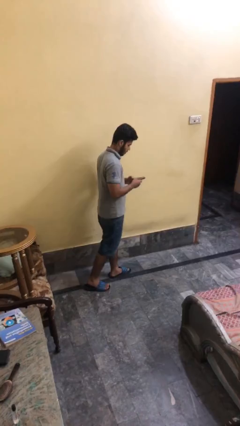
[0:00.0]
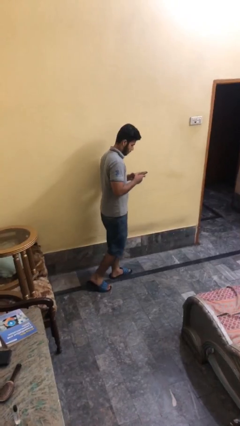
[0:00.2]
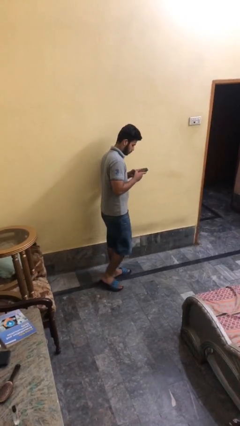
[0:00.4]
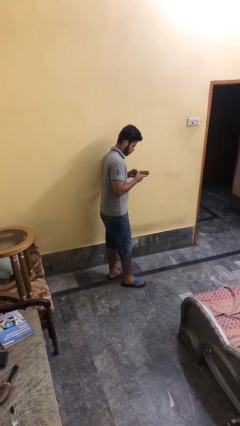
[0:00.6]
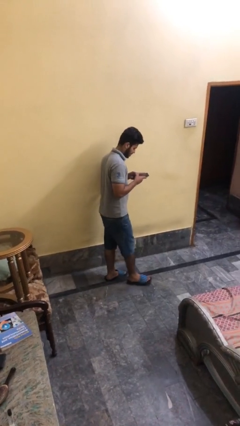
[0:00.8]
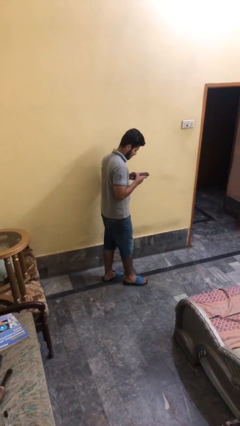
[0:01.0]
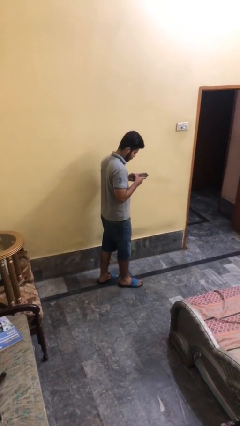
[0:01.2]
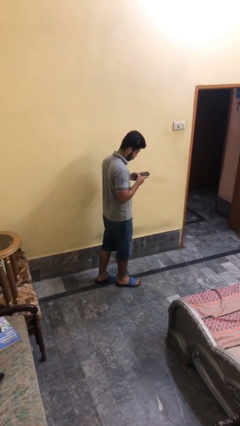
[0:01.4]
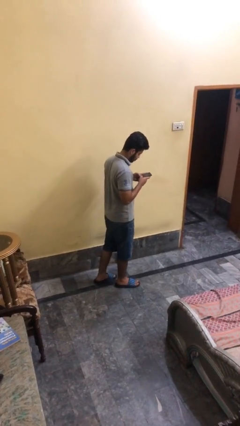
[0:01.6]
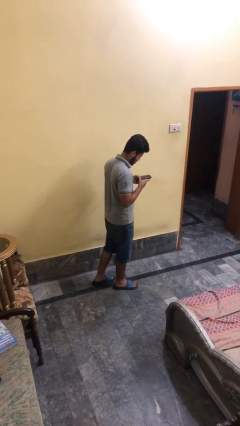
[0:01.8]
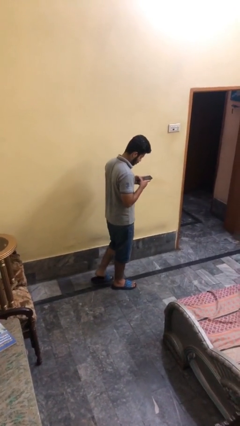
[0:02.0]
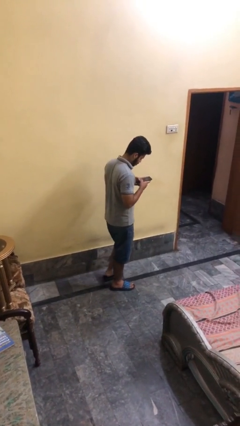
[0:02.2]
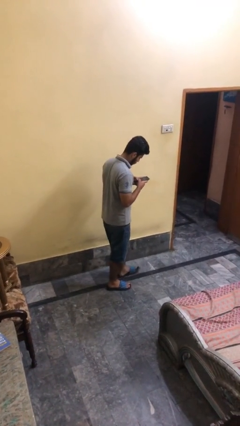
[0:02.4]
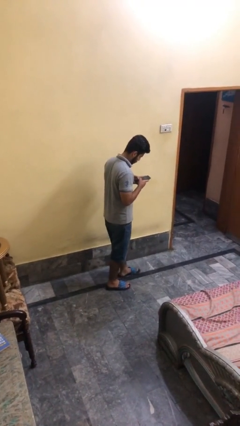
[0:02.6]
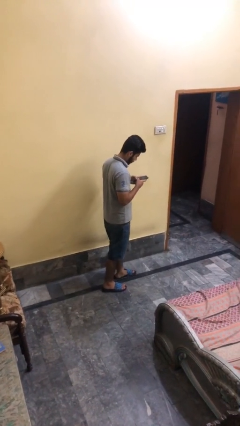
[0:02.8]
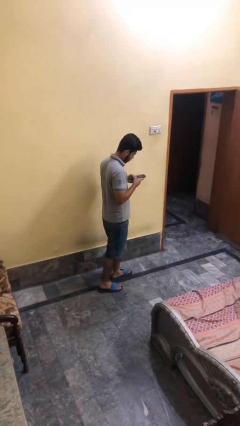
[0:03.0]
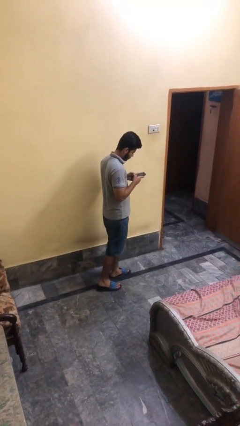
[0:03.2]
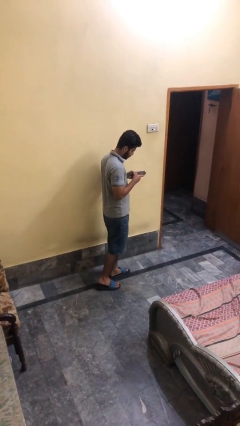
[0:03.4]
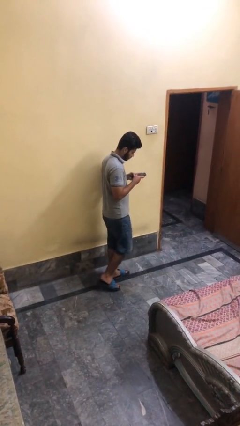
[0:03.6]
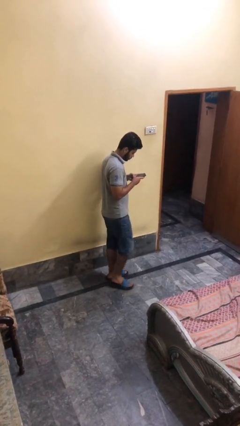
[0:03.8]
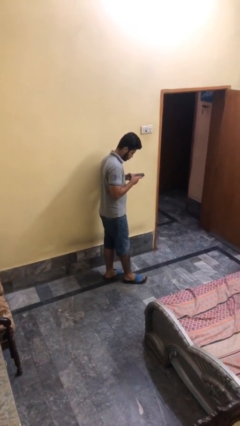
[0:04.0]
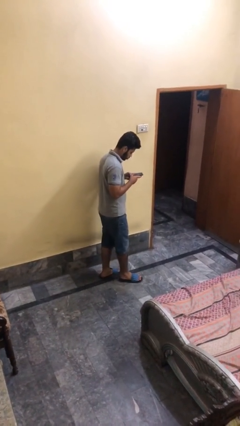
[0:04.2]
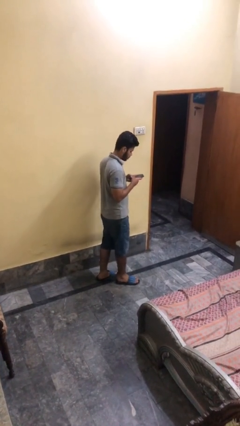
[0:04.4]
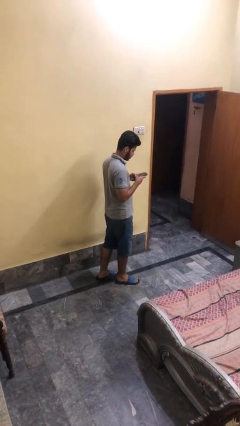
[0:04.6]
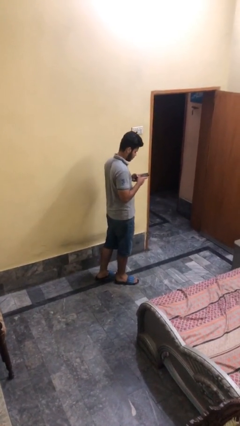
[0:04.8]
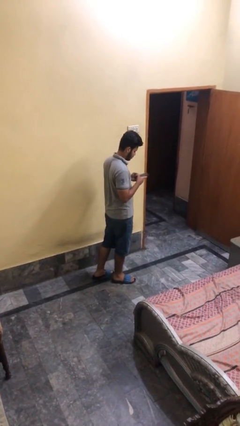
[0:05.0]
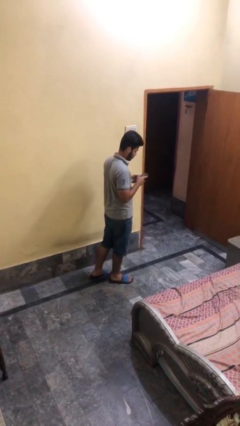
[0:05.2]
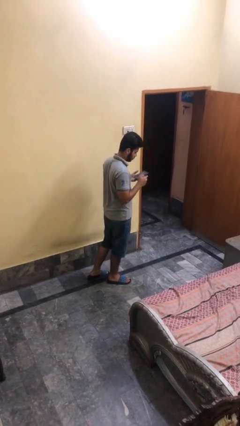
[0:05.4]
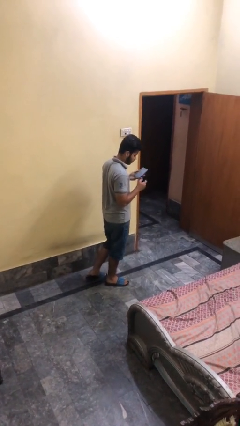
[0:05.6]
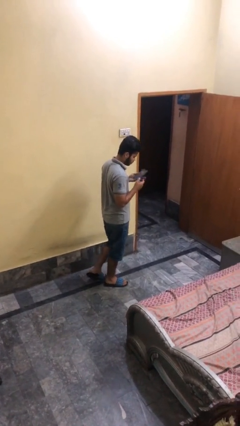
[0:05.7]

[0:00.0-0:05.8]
person texts on phone

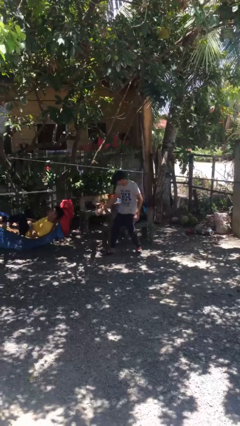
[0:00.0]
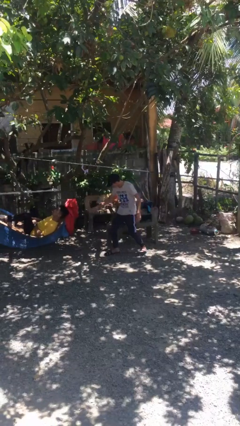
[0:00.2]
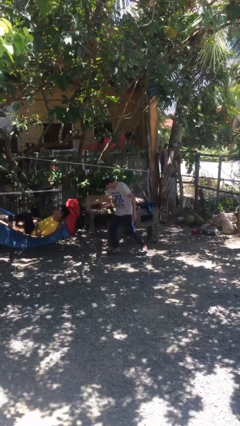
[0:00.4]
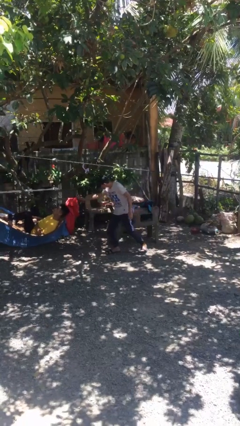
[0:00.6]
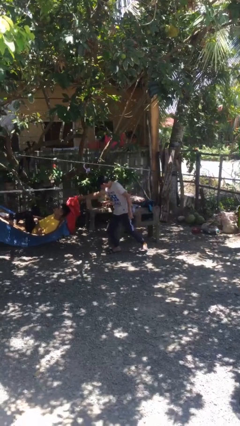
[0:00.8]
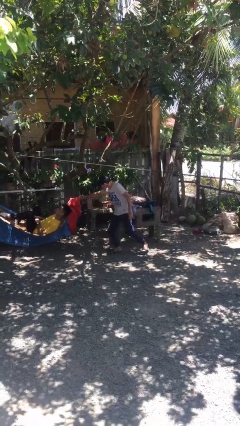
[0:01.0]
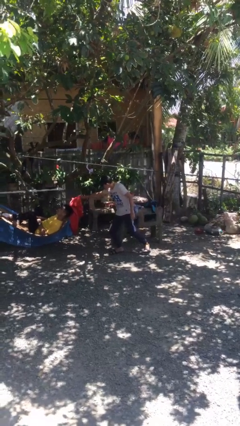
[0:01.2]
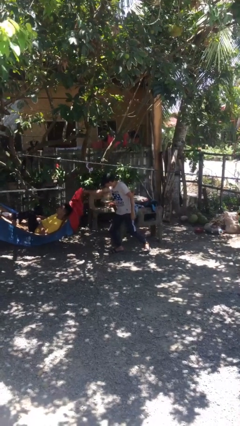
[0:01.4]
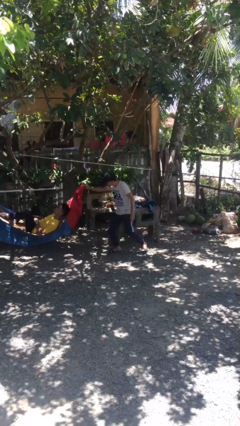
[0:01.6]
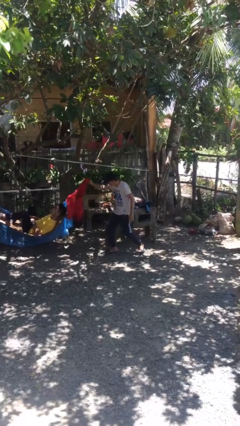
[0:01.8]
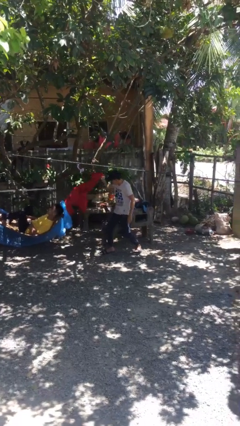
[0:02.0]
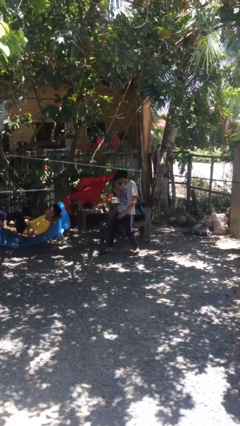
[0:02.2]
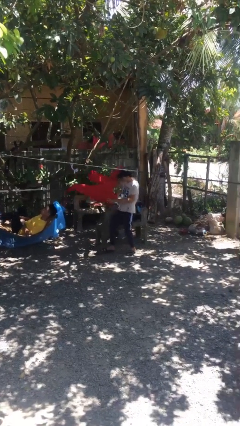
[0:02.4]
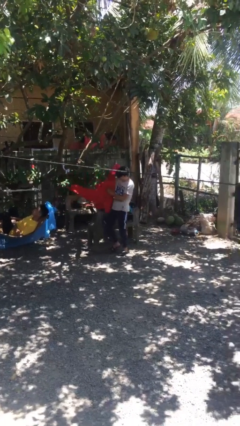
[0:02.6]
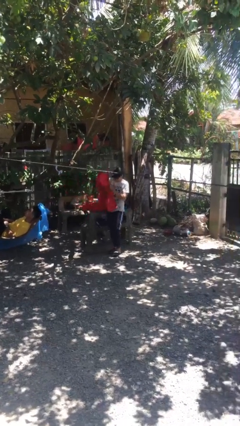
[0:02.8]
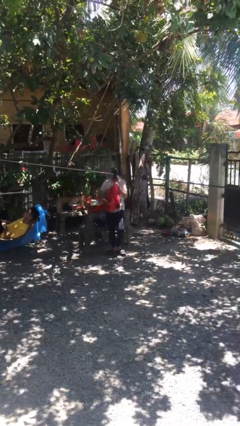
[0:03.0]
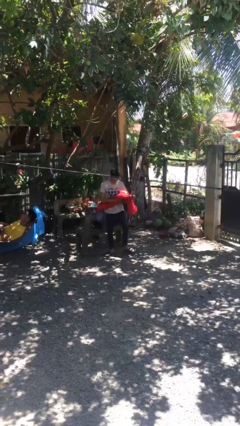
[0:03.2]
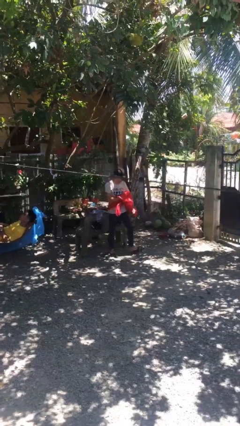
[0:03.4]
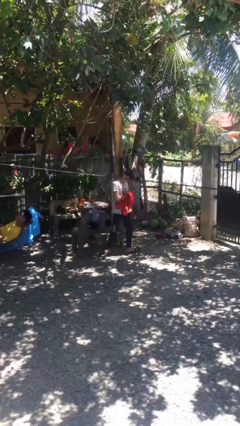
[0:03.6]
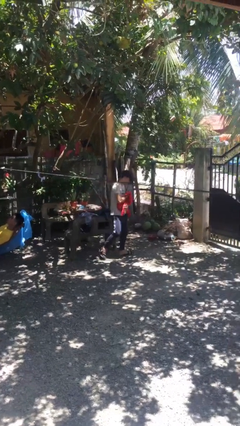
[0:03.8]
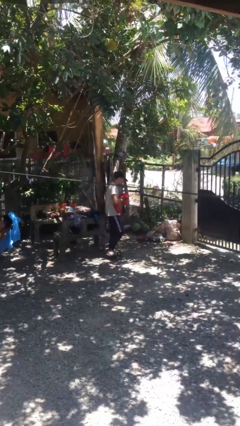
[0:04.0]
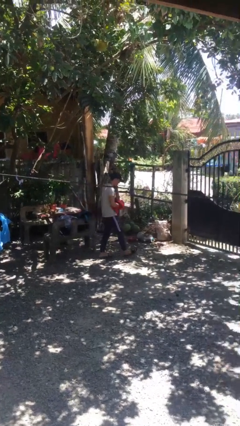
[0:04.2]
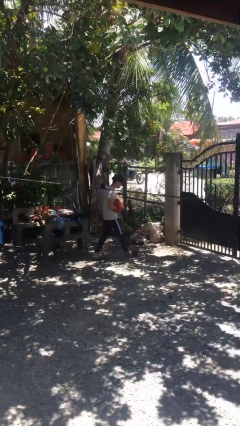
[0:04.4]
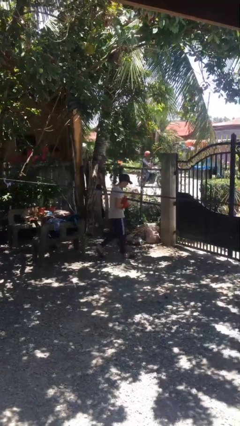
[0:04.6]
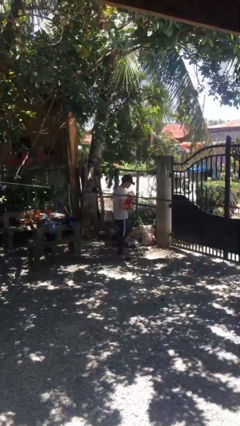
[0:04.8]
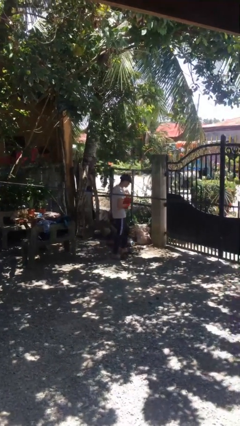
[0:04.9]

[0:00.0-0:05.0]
person steals object from person

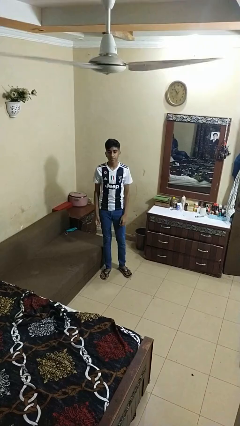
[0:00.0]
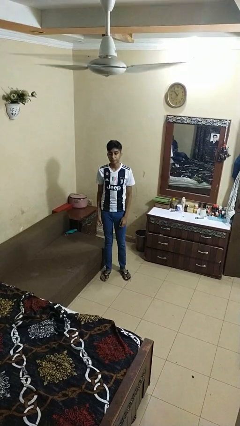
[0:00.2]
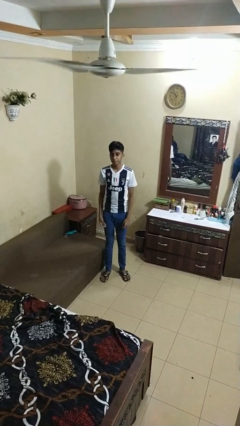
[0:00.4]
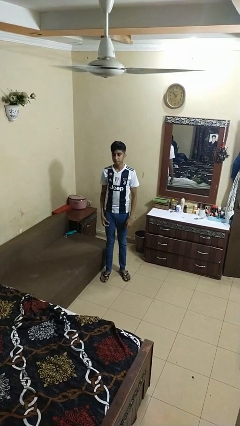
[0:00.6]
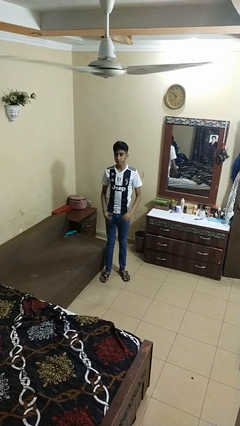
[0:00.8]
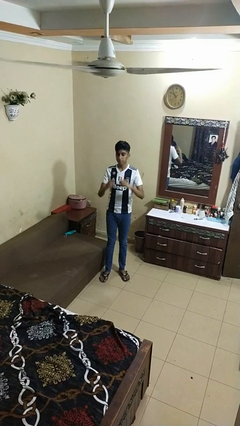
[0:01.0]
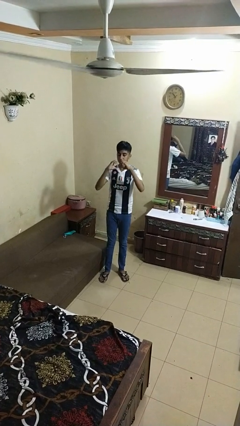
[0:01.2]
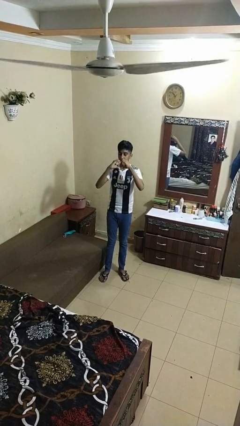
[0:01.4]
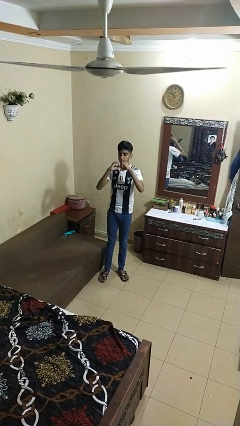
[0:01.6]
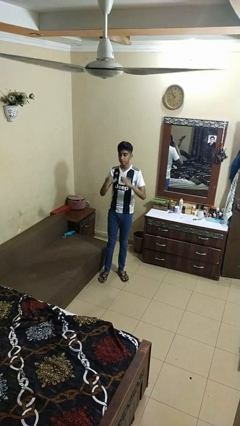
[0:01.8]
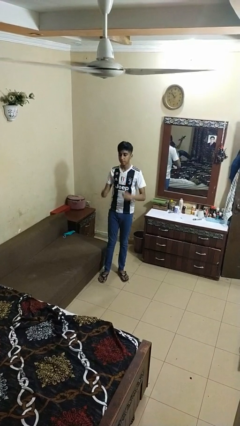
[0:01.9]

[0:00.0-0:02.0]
person gestures heart

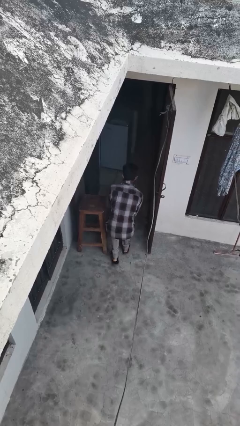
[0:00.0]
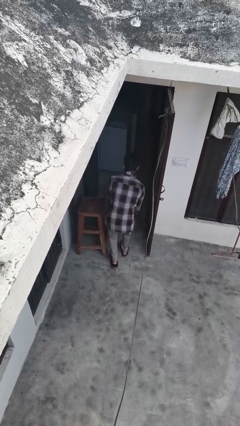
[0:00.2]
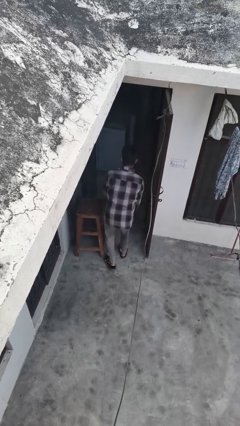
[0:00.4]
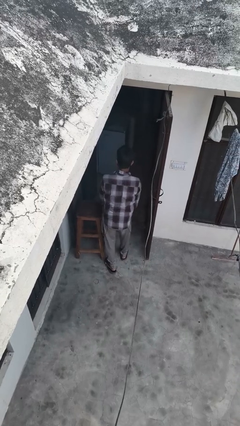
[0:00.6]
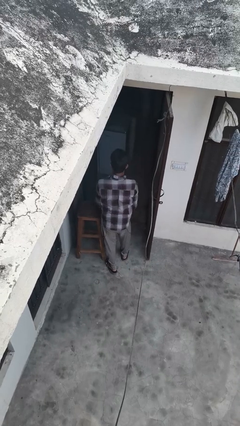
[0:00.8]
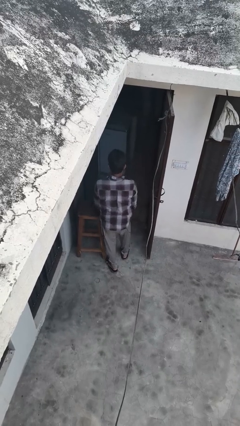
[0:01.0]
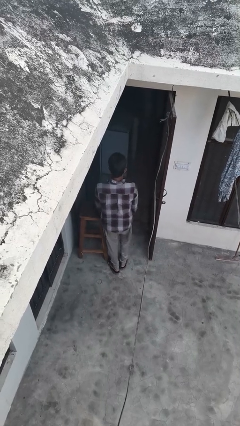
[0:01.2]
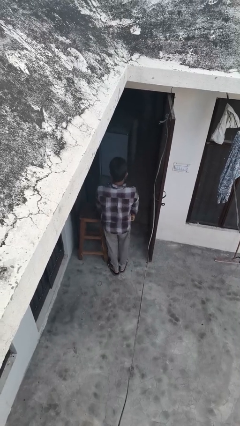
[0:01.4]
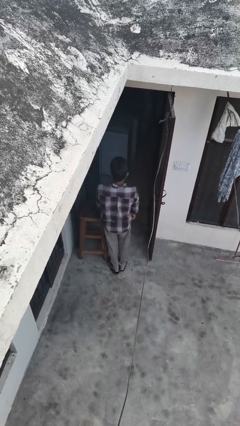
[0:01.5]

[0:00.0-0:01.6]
person stands up from floor

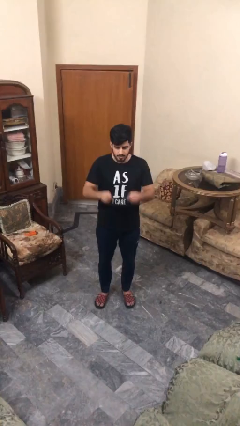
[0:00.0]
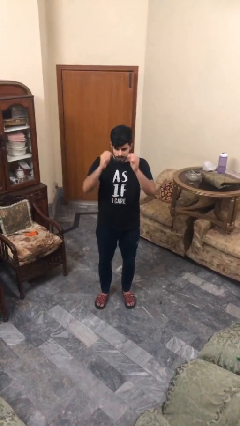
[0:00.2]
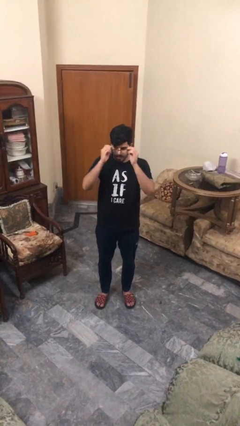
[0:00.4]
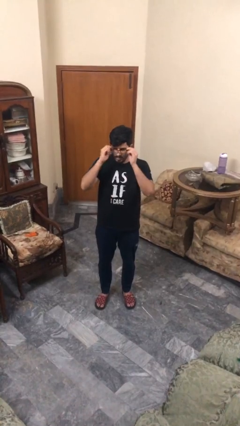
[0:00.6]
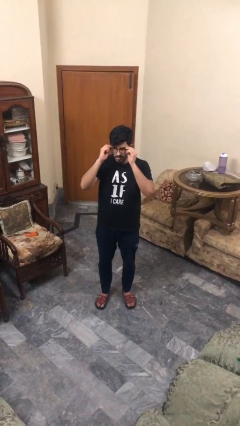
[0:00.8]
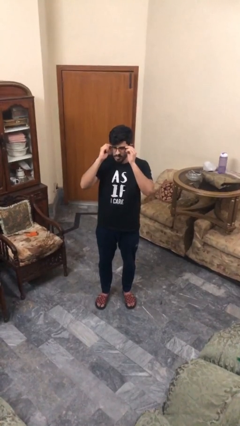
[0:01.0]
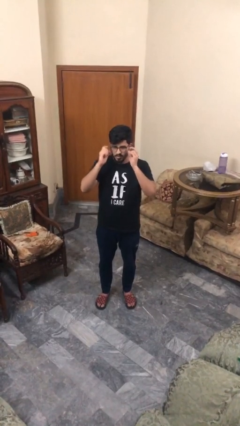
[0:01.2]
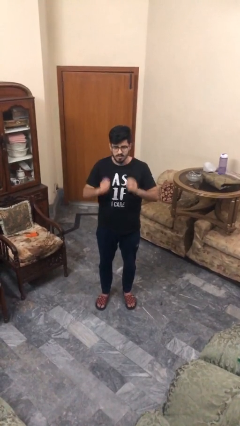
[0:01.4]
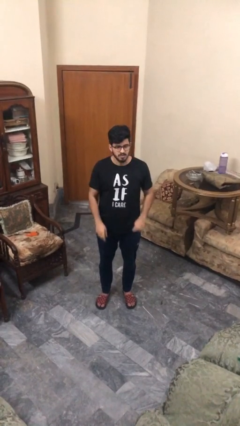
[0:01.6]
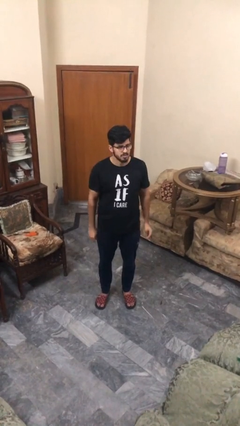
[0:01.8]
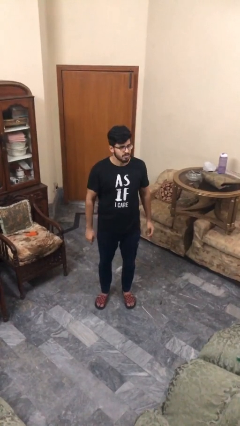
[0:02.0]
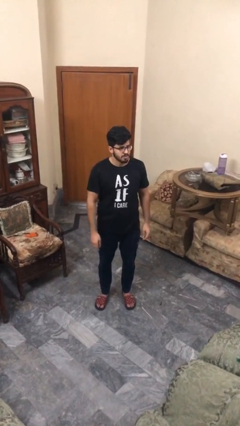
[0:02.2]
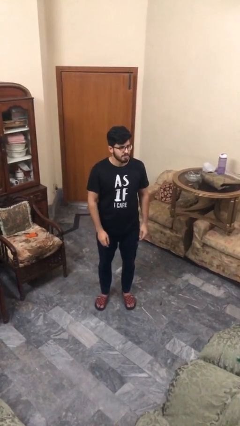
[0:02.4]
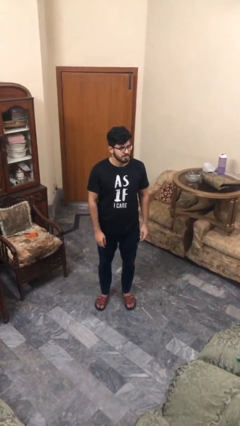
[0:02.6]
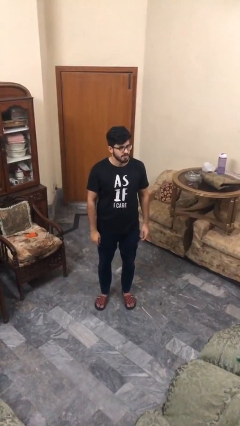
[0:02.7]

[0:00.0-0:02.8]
person puts on glasses

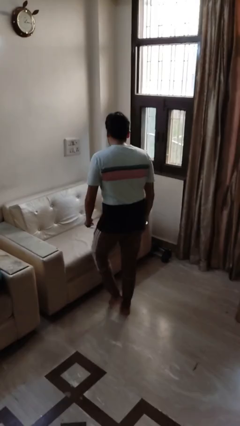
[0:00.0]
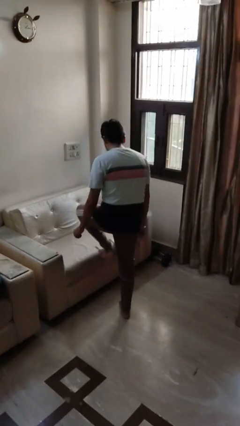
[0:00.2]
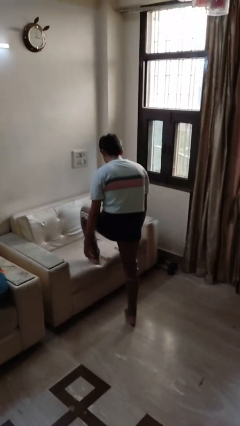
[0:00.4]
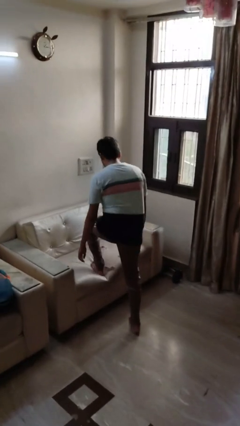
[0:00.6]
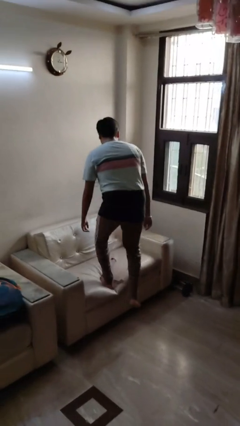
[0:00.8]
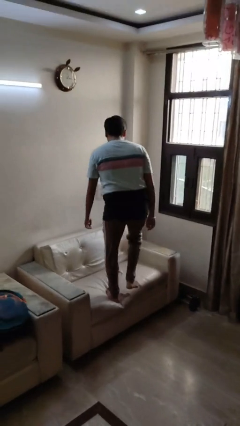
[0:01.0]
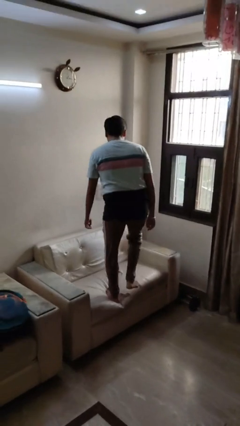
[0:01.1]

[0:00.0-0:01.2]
person climbs on couch
